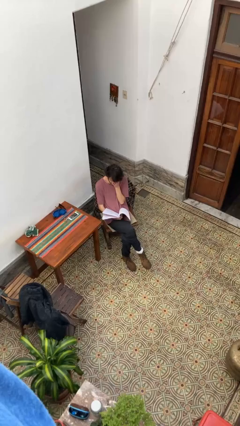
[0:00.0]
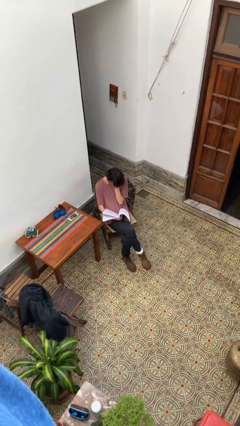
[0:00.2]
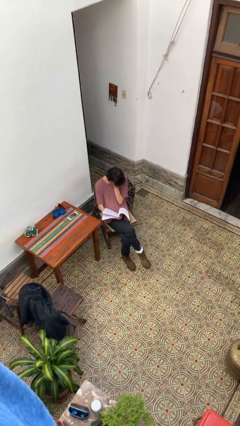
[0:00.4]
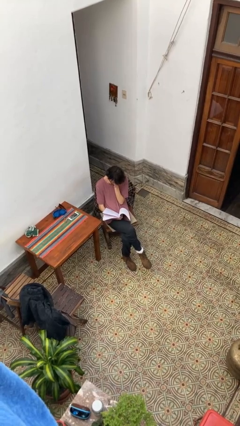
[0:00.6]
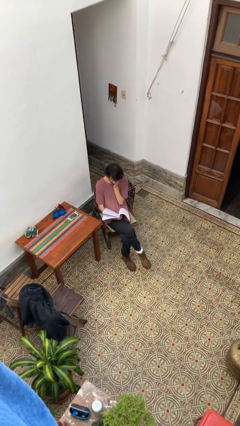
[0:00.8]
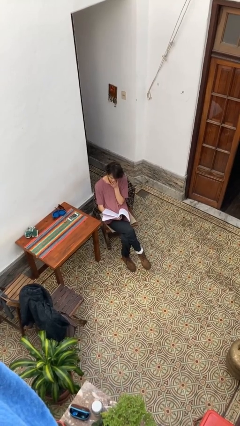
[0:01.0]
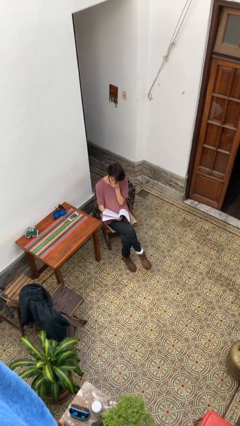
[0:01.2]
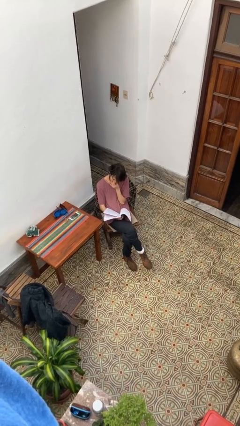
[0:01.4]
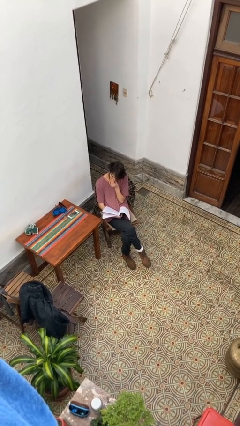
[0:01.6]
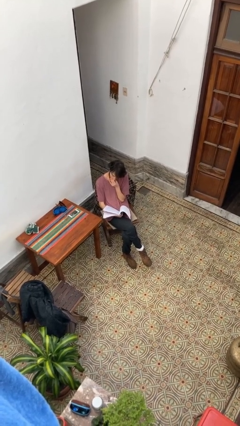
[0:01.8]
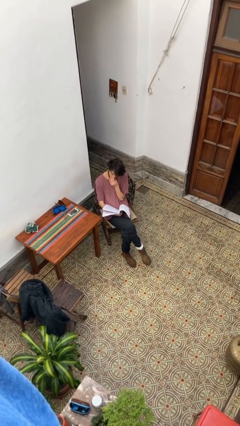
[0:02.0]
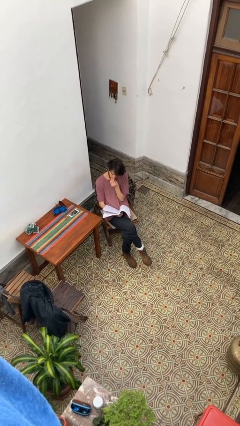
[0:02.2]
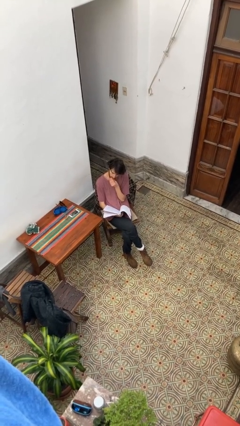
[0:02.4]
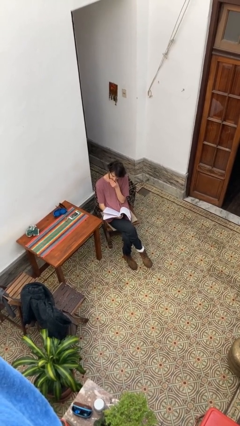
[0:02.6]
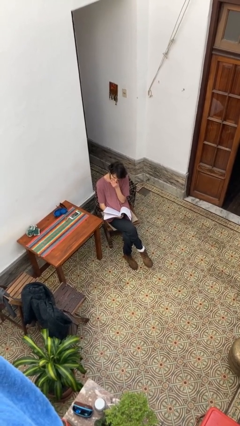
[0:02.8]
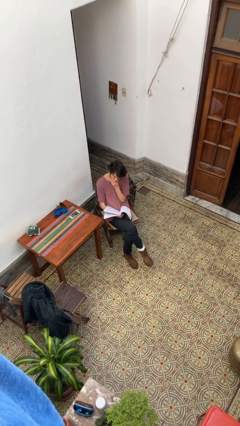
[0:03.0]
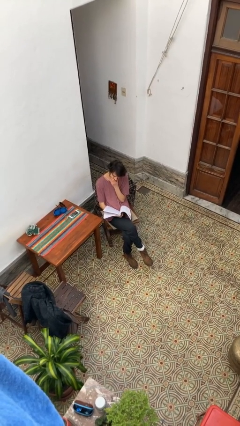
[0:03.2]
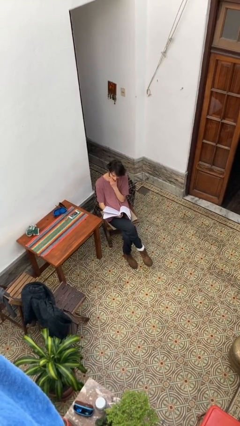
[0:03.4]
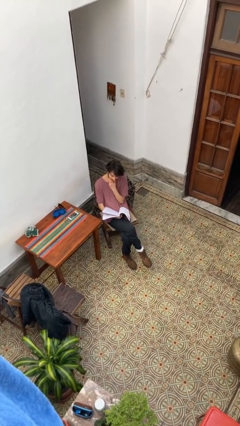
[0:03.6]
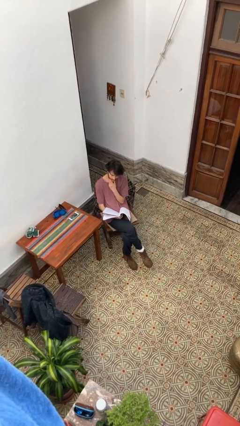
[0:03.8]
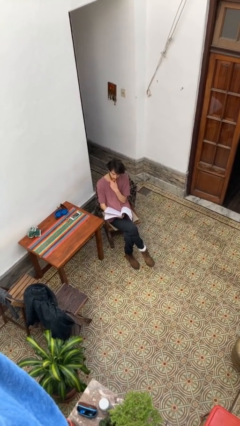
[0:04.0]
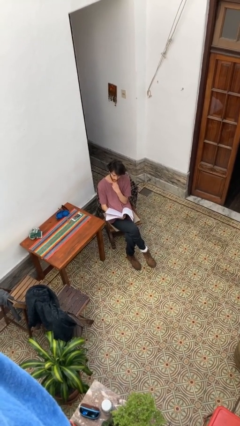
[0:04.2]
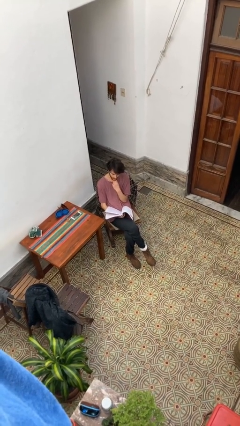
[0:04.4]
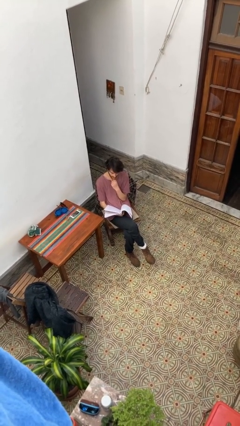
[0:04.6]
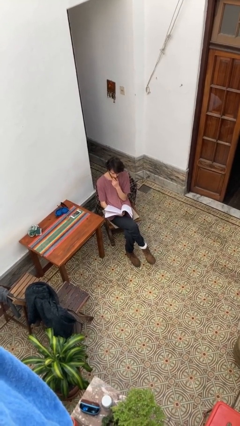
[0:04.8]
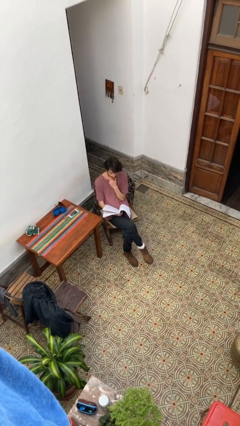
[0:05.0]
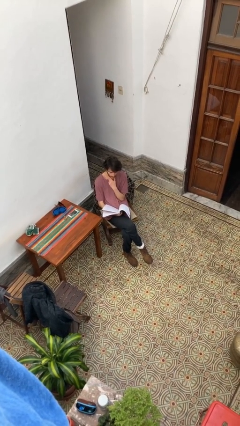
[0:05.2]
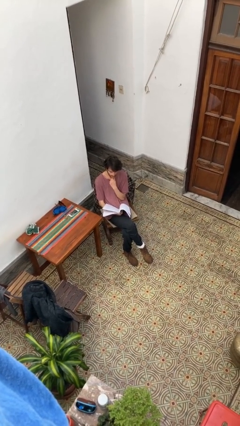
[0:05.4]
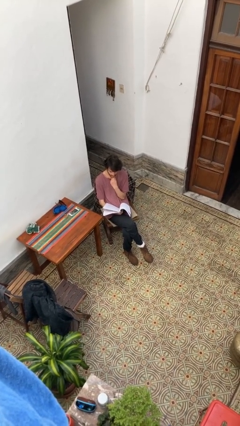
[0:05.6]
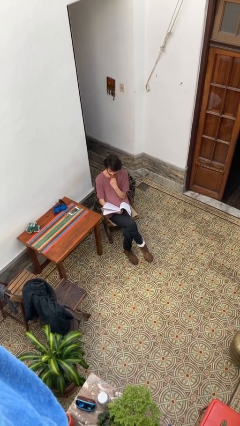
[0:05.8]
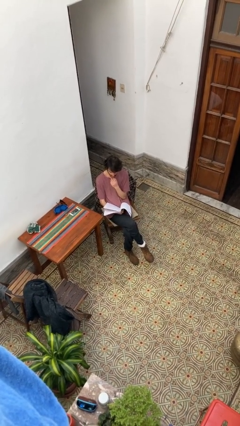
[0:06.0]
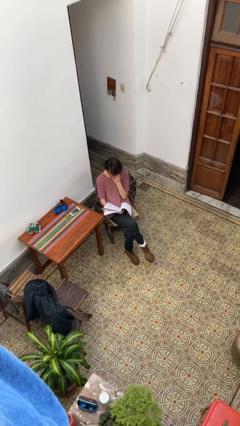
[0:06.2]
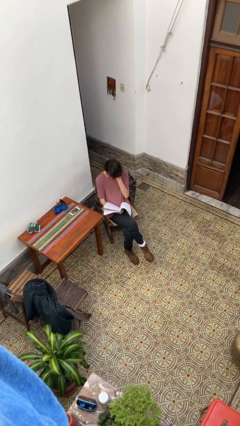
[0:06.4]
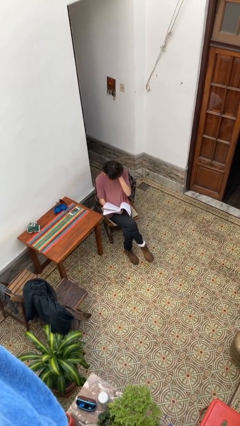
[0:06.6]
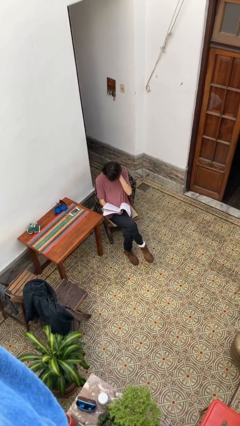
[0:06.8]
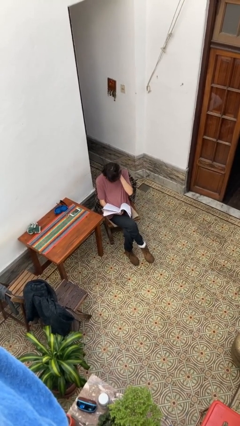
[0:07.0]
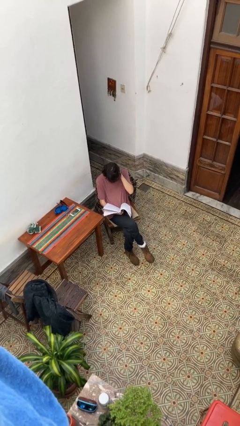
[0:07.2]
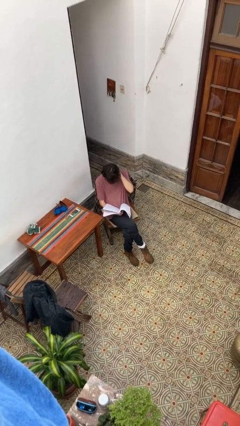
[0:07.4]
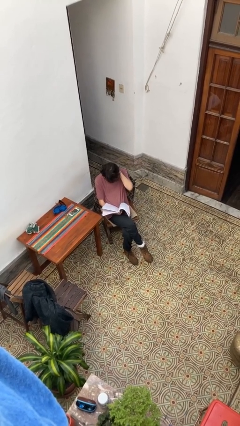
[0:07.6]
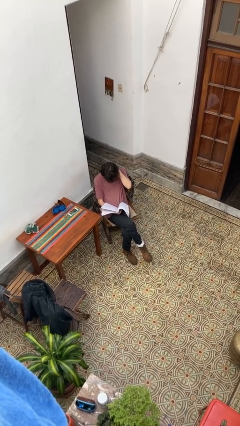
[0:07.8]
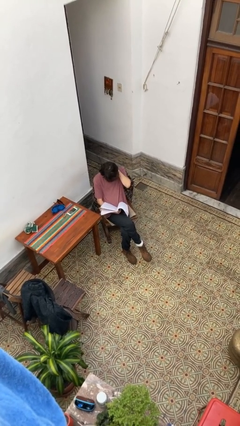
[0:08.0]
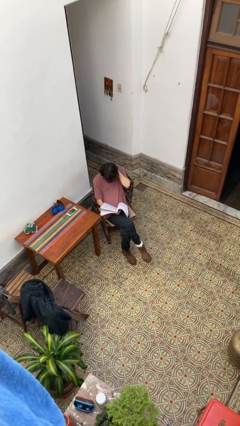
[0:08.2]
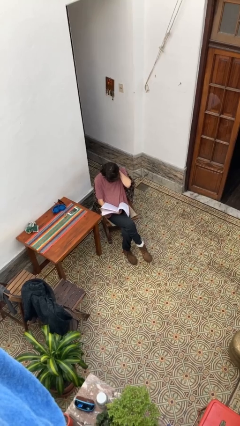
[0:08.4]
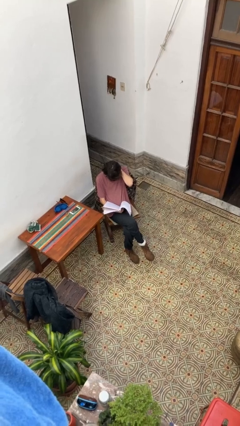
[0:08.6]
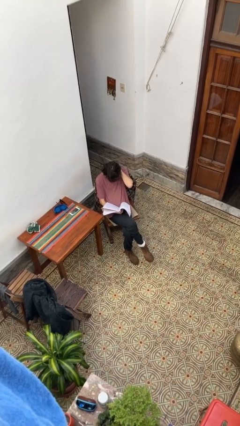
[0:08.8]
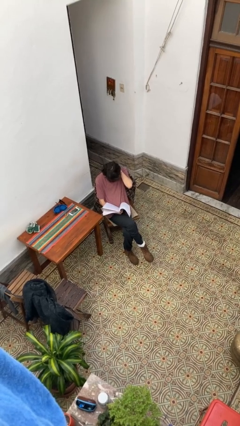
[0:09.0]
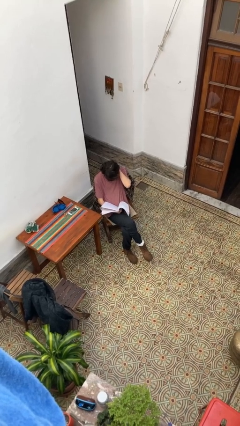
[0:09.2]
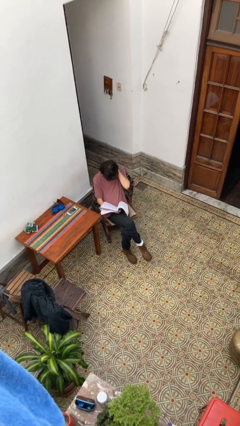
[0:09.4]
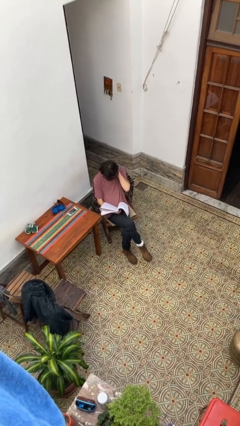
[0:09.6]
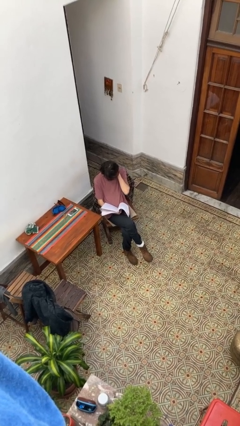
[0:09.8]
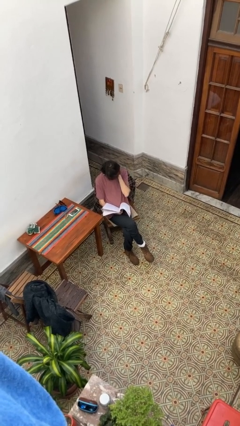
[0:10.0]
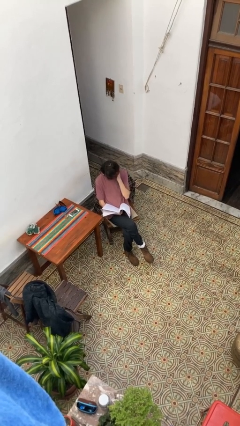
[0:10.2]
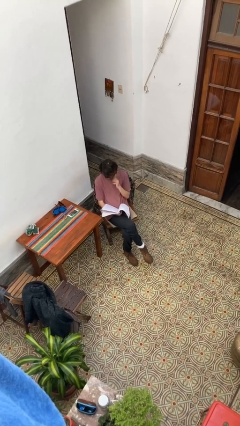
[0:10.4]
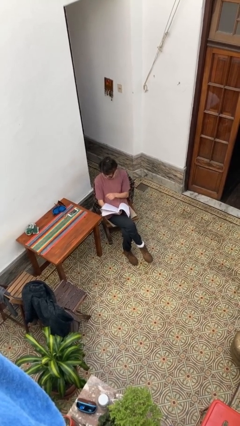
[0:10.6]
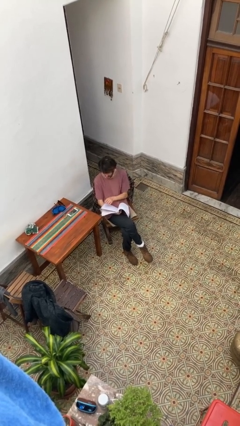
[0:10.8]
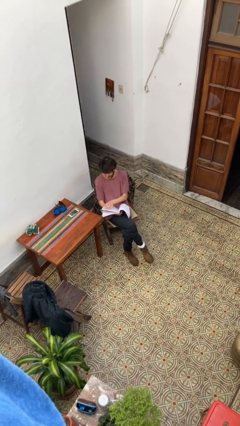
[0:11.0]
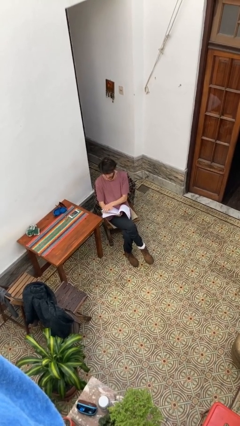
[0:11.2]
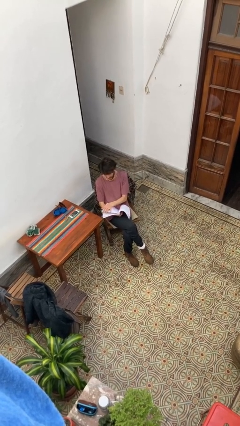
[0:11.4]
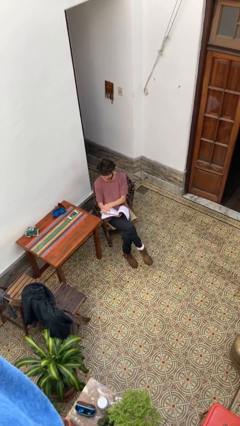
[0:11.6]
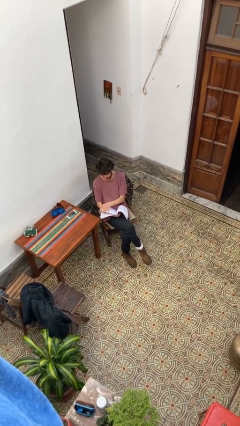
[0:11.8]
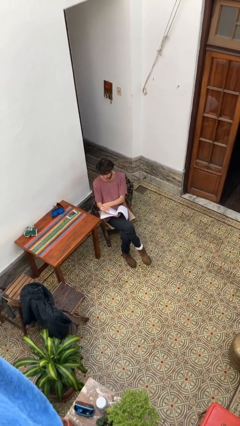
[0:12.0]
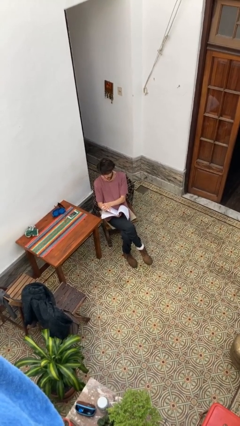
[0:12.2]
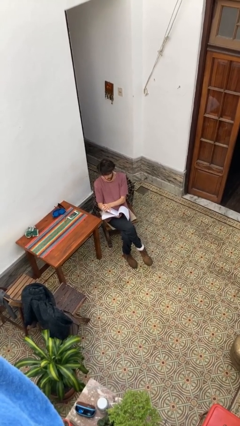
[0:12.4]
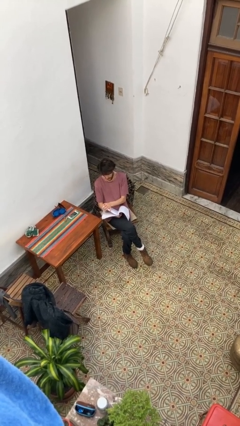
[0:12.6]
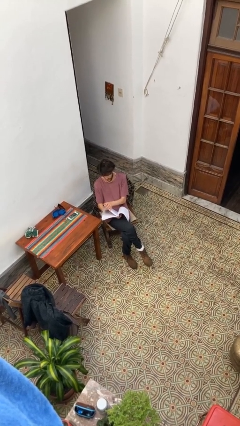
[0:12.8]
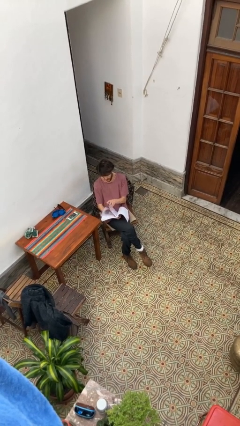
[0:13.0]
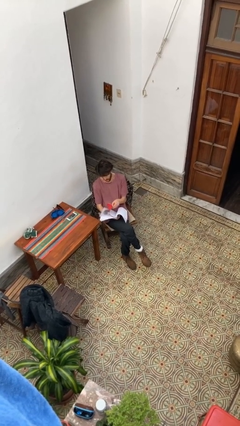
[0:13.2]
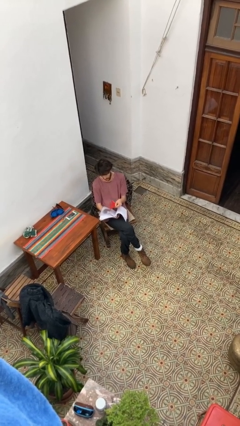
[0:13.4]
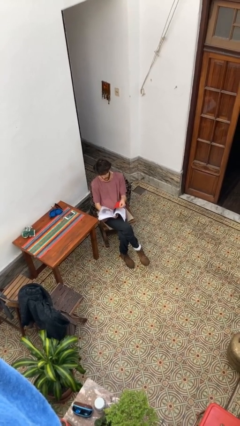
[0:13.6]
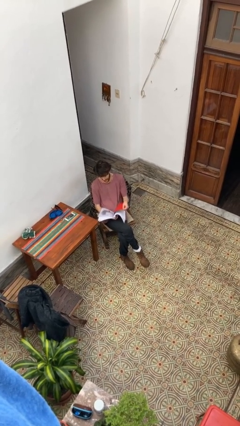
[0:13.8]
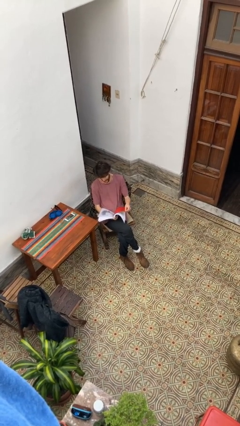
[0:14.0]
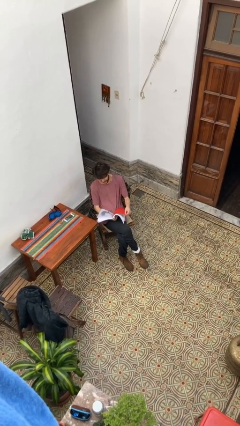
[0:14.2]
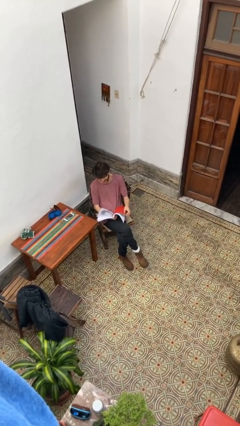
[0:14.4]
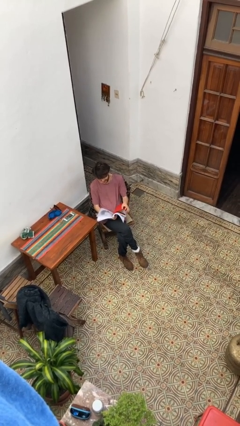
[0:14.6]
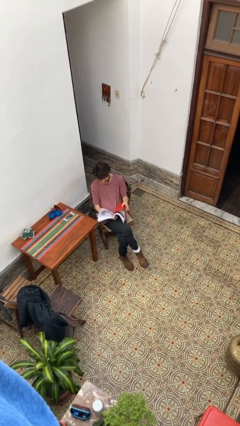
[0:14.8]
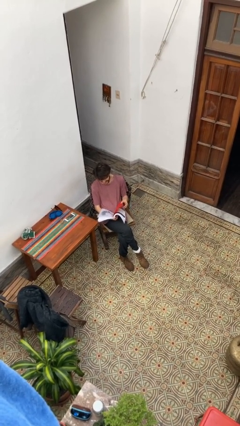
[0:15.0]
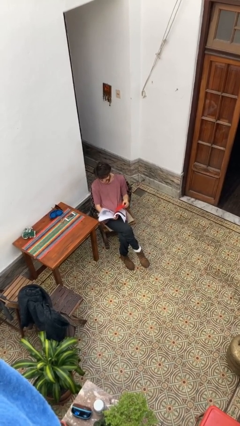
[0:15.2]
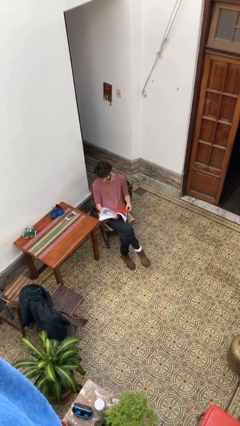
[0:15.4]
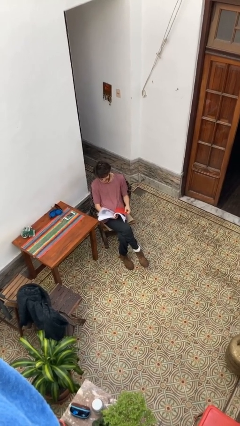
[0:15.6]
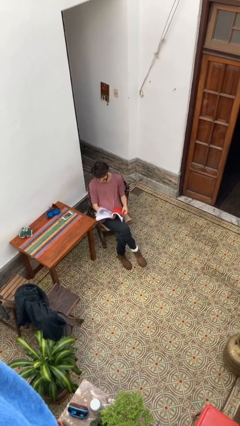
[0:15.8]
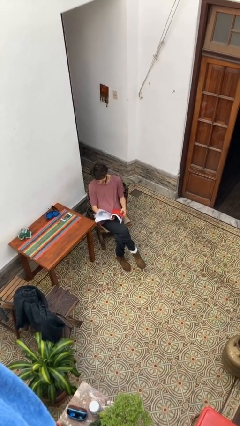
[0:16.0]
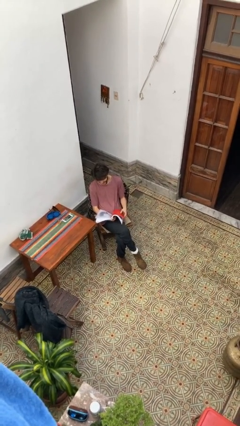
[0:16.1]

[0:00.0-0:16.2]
person reads document

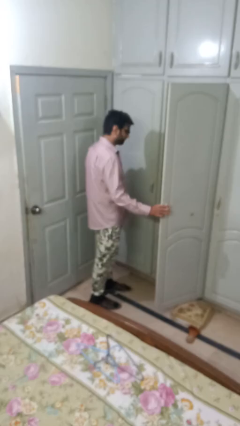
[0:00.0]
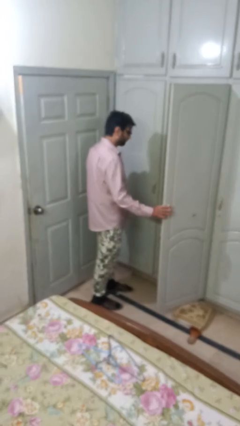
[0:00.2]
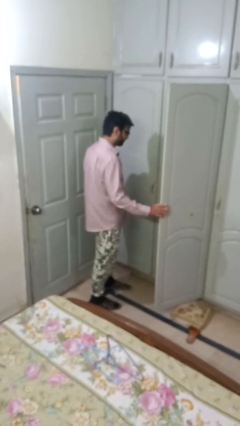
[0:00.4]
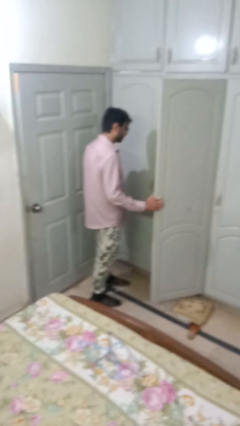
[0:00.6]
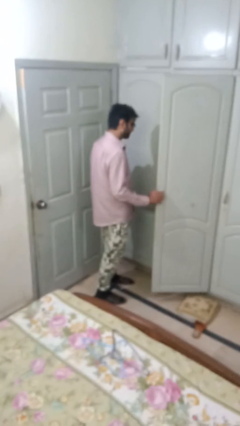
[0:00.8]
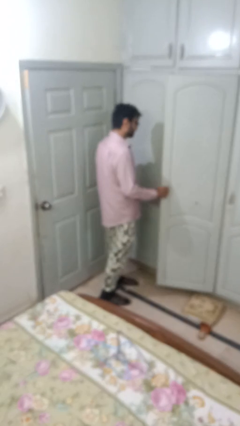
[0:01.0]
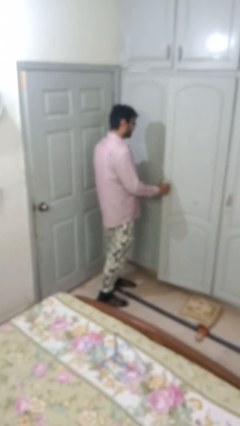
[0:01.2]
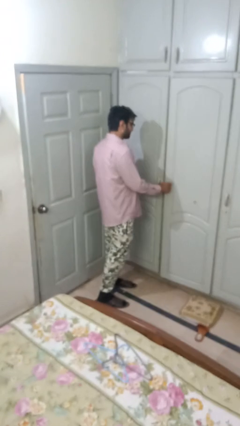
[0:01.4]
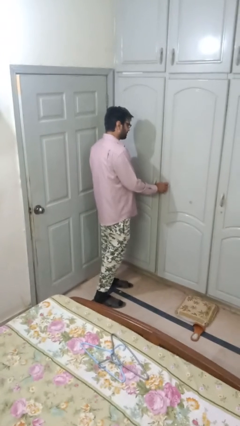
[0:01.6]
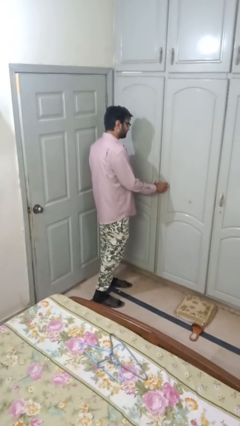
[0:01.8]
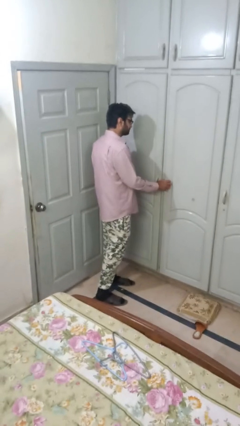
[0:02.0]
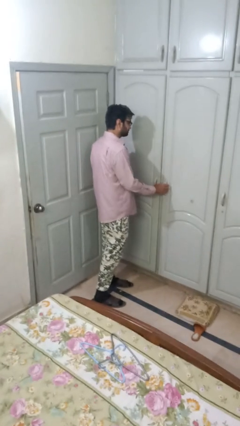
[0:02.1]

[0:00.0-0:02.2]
person closes closet door
